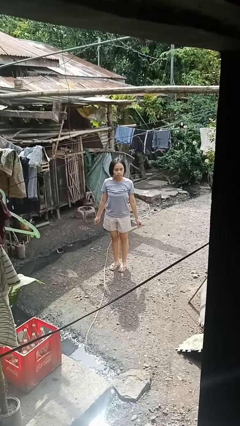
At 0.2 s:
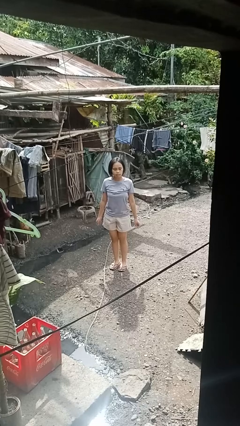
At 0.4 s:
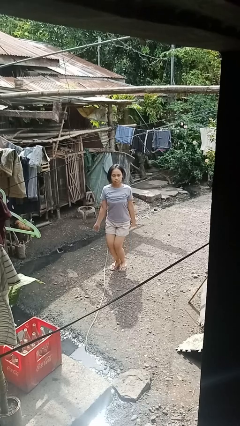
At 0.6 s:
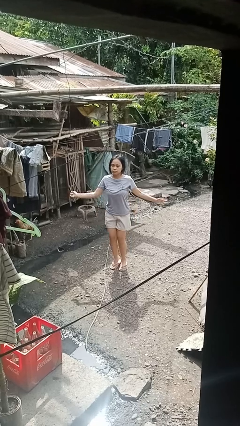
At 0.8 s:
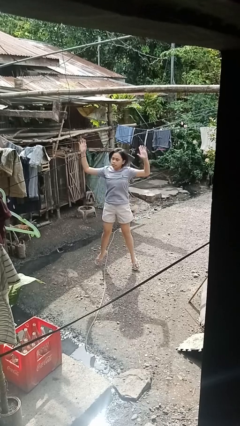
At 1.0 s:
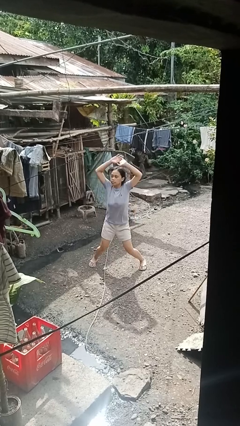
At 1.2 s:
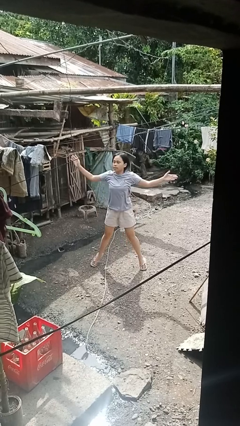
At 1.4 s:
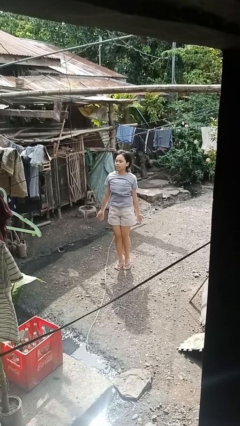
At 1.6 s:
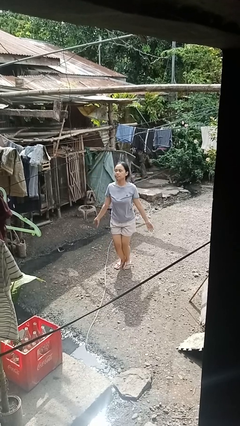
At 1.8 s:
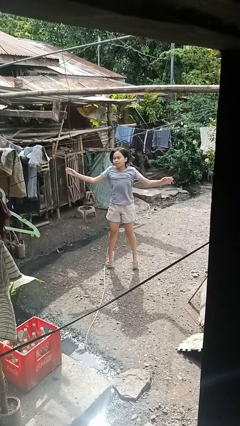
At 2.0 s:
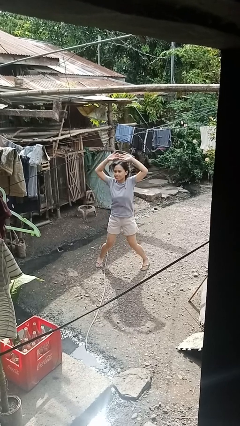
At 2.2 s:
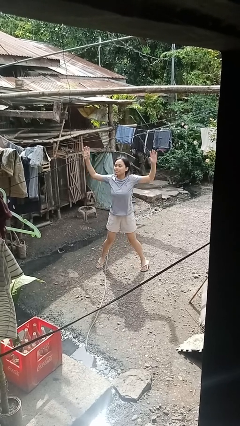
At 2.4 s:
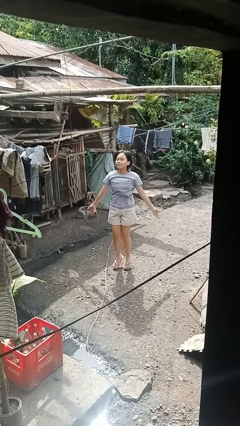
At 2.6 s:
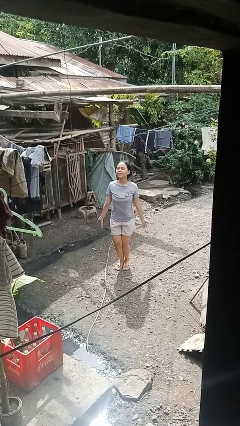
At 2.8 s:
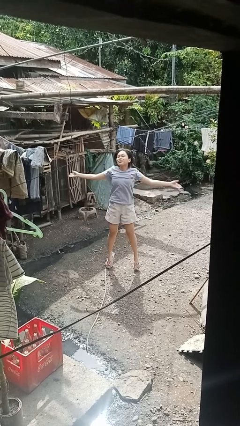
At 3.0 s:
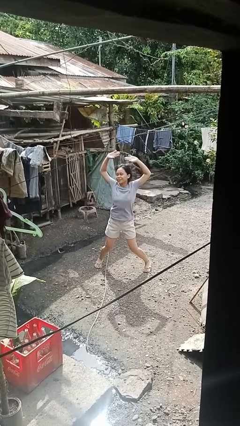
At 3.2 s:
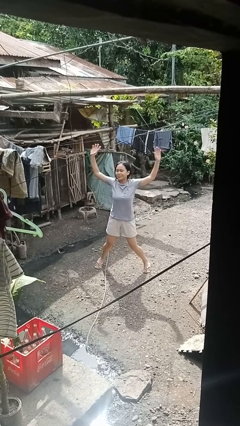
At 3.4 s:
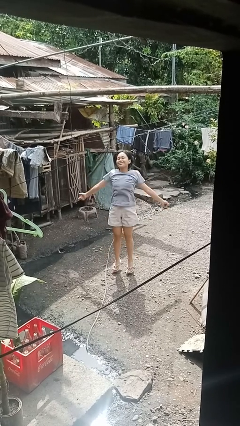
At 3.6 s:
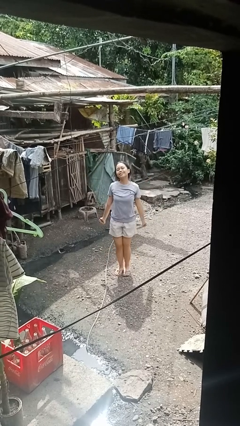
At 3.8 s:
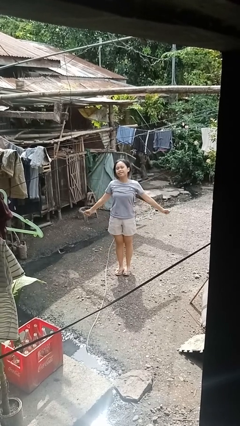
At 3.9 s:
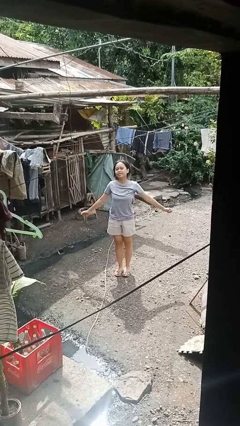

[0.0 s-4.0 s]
person exercises with jumping jacks

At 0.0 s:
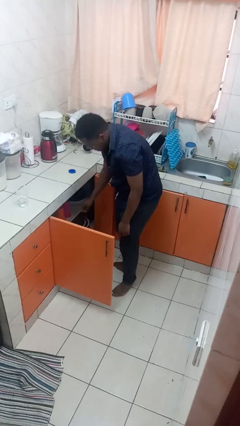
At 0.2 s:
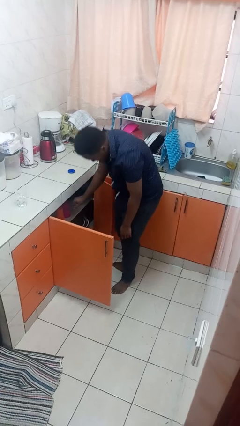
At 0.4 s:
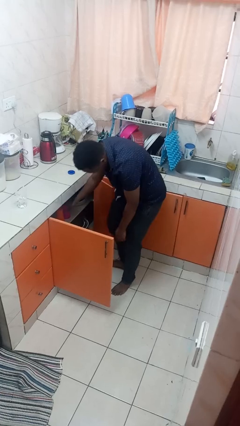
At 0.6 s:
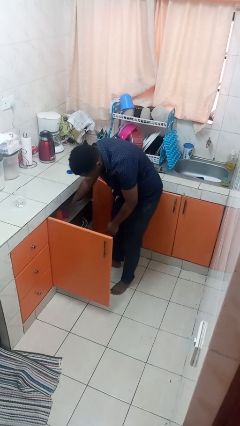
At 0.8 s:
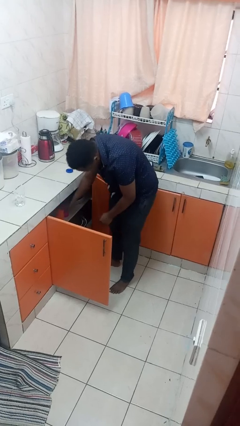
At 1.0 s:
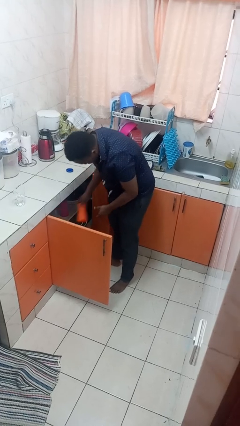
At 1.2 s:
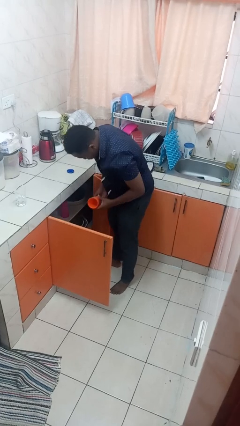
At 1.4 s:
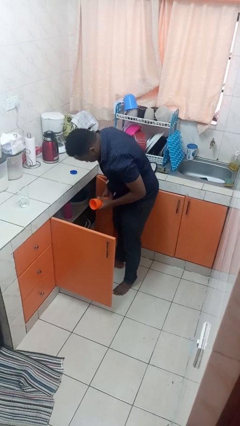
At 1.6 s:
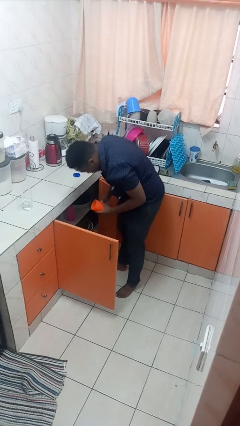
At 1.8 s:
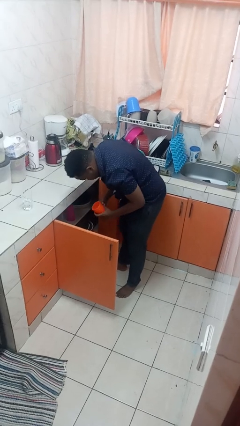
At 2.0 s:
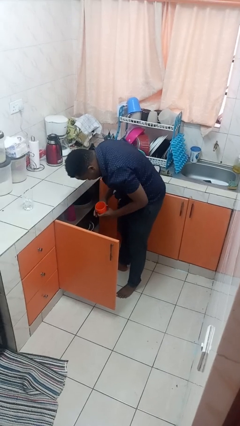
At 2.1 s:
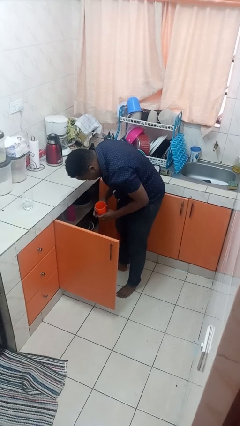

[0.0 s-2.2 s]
person takes object from cabinet

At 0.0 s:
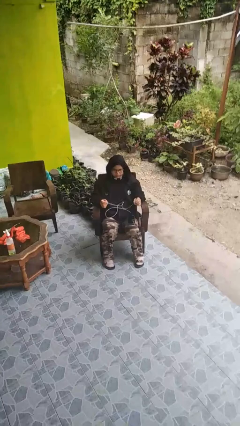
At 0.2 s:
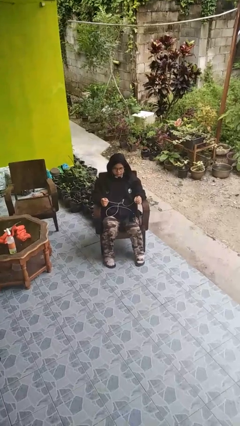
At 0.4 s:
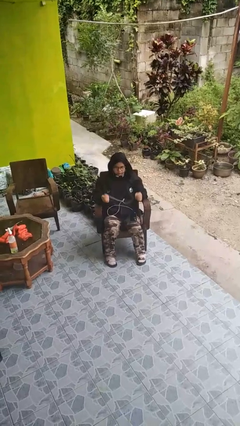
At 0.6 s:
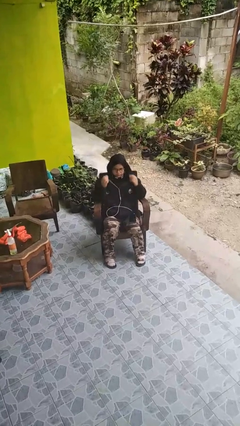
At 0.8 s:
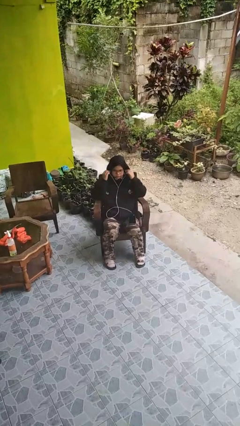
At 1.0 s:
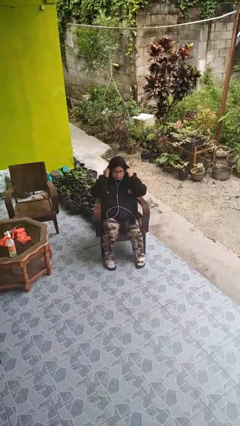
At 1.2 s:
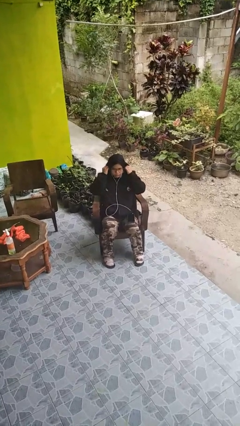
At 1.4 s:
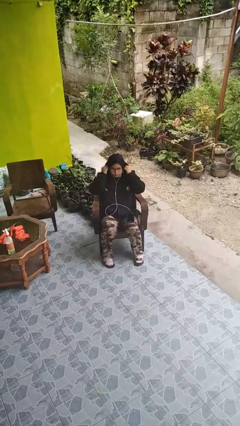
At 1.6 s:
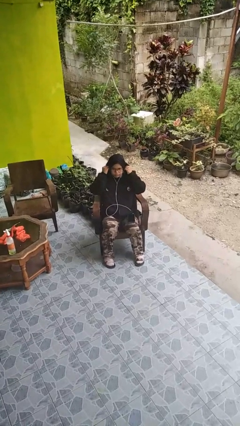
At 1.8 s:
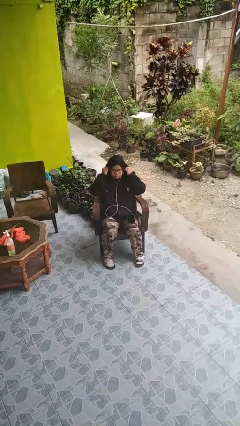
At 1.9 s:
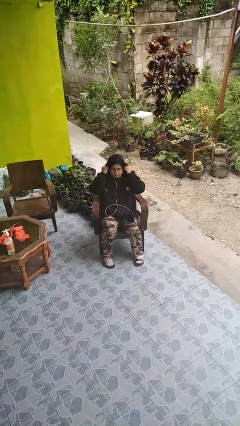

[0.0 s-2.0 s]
person puts on headphones

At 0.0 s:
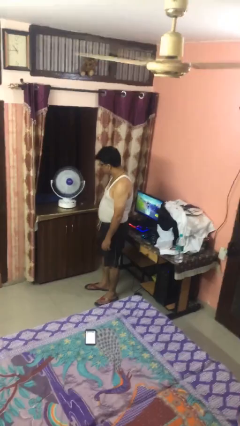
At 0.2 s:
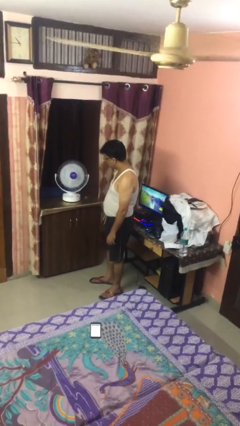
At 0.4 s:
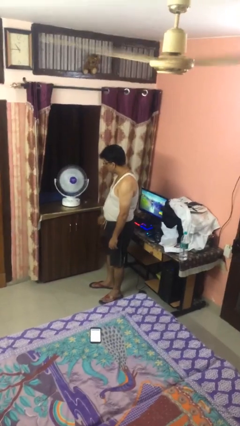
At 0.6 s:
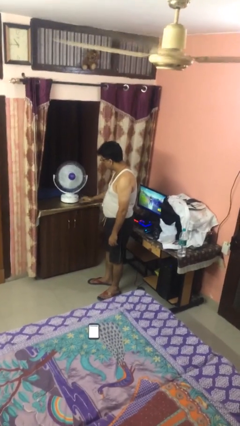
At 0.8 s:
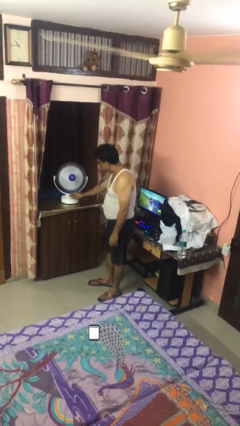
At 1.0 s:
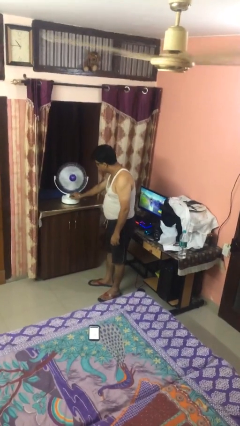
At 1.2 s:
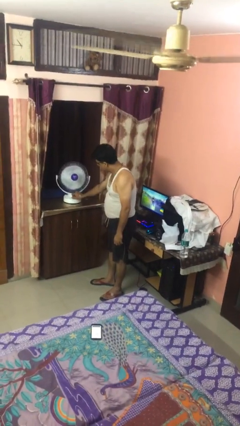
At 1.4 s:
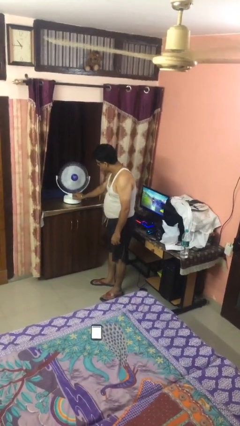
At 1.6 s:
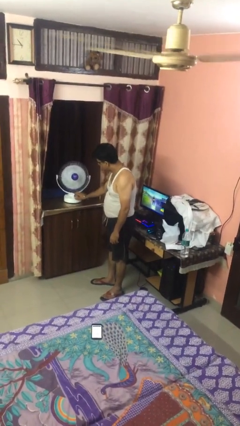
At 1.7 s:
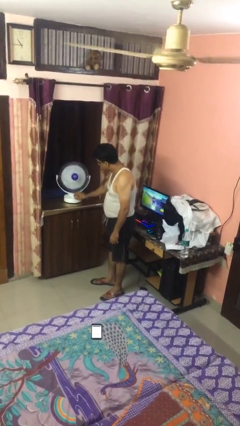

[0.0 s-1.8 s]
person turns on fan

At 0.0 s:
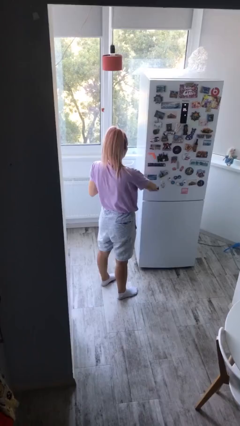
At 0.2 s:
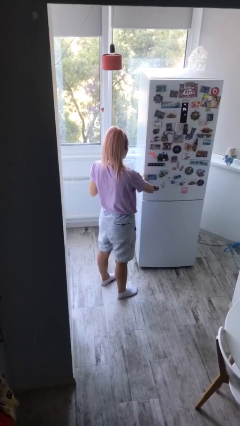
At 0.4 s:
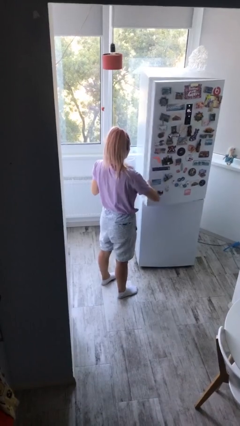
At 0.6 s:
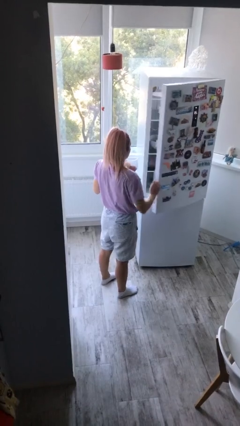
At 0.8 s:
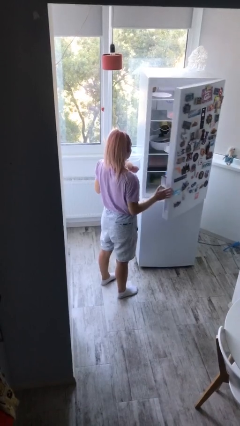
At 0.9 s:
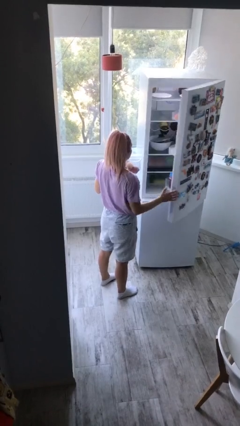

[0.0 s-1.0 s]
person opens refrigerator

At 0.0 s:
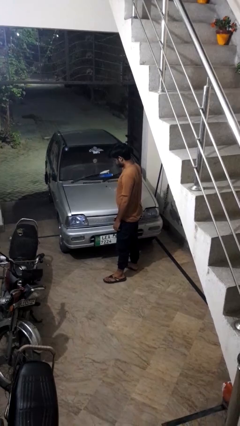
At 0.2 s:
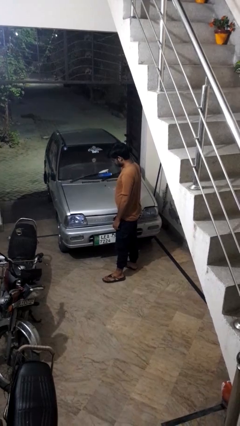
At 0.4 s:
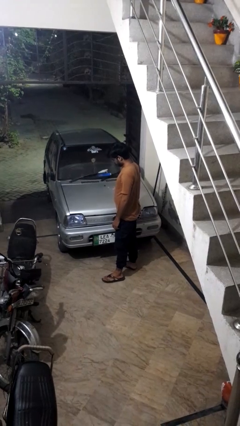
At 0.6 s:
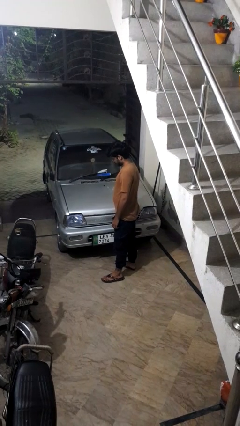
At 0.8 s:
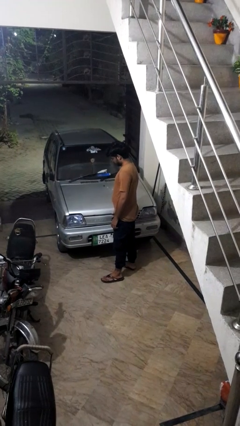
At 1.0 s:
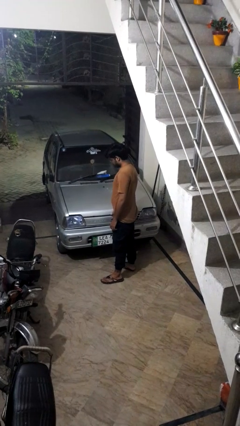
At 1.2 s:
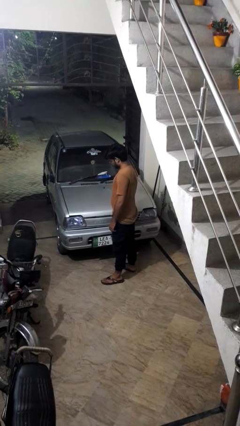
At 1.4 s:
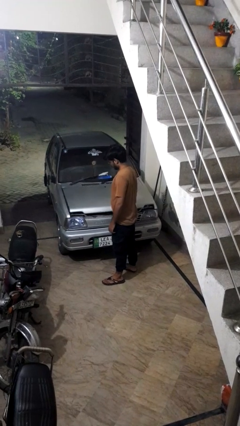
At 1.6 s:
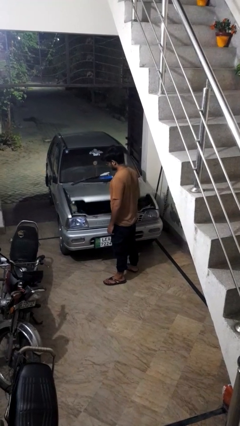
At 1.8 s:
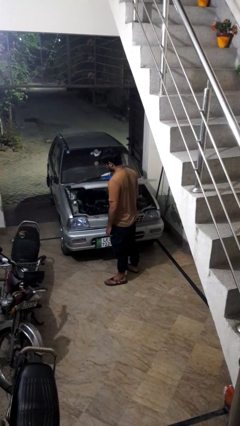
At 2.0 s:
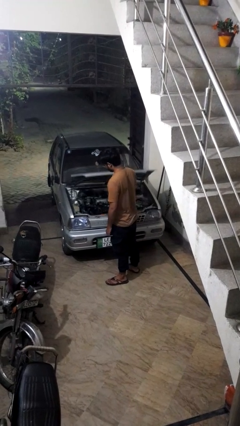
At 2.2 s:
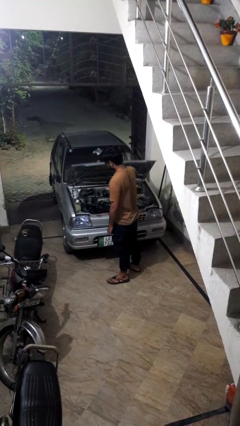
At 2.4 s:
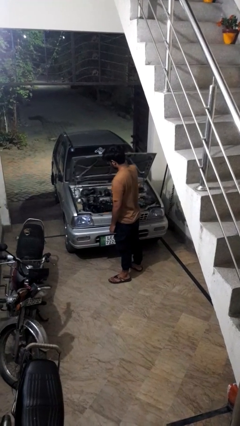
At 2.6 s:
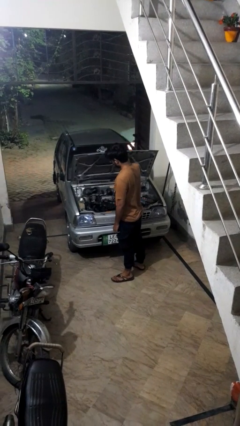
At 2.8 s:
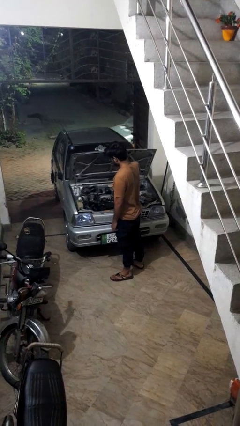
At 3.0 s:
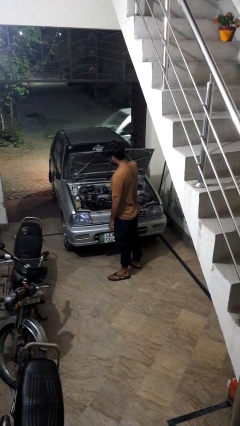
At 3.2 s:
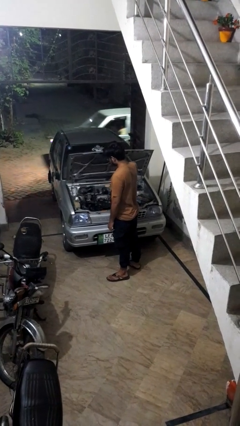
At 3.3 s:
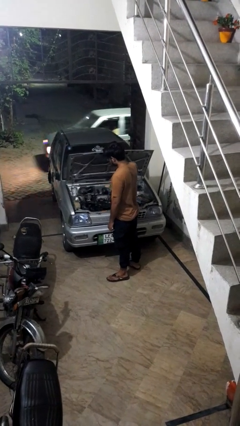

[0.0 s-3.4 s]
person opens car hood

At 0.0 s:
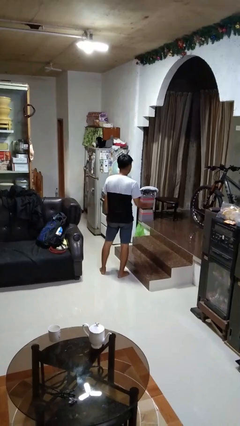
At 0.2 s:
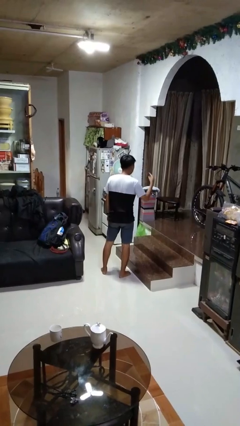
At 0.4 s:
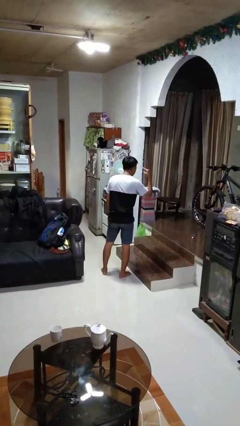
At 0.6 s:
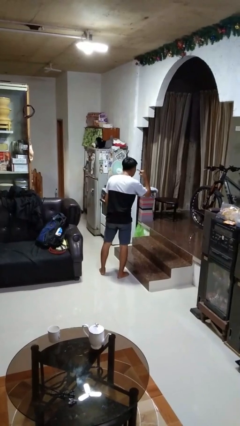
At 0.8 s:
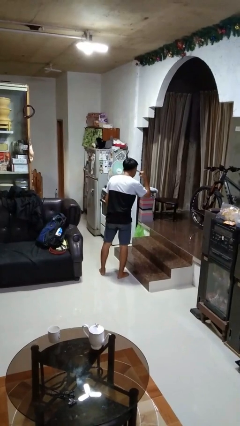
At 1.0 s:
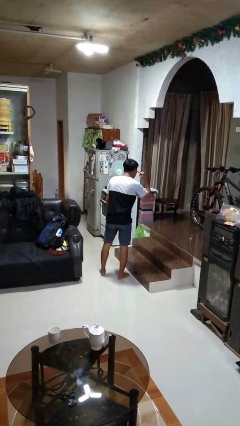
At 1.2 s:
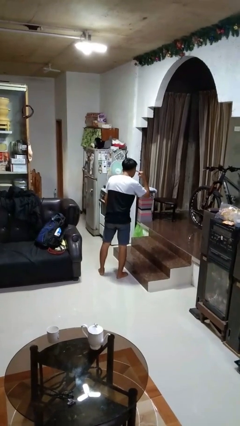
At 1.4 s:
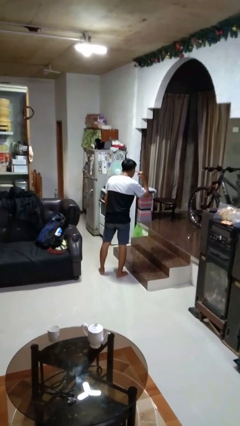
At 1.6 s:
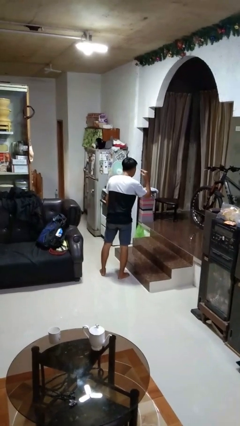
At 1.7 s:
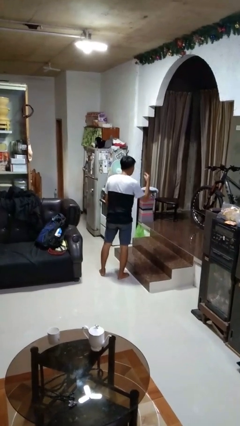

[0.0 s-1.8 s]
person gestures listen closely

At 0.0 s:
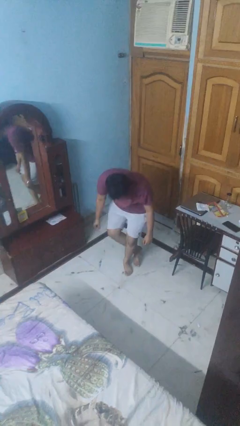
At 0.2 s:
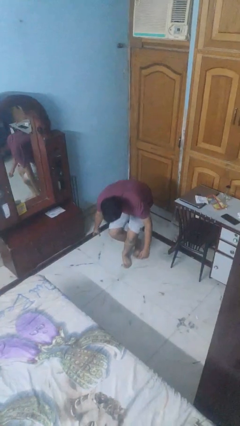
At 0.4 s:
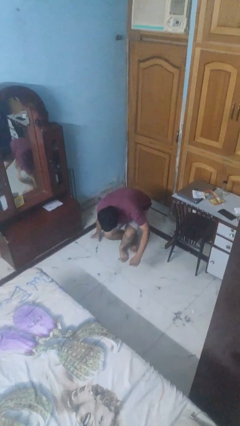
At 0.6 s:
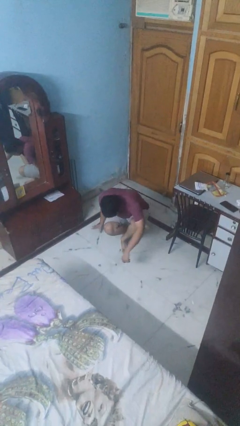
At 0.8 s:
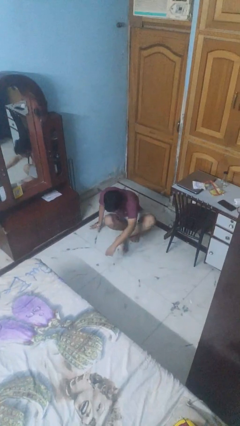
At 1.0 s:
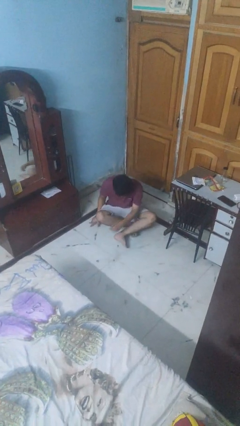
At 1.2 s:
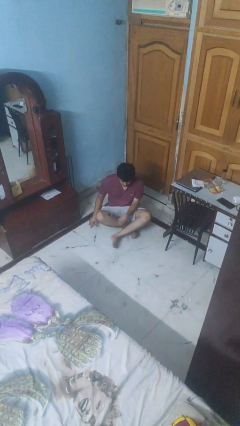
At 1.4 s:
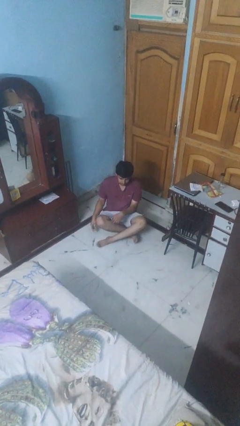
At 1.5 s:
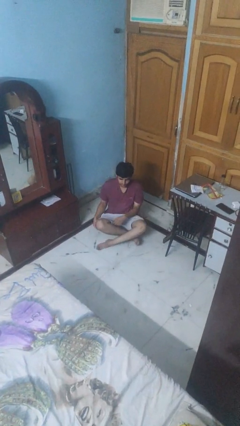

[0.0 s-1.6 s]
person sits crisscross
